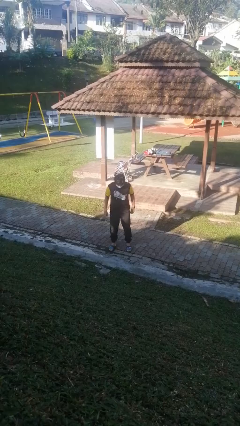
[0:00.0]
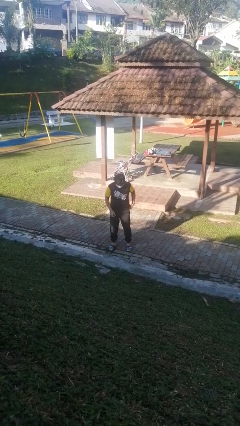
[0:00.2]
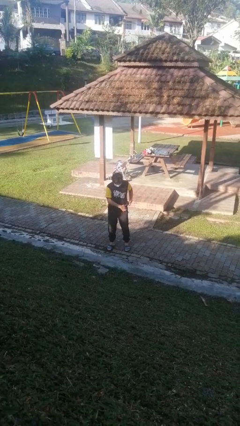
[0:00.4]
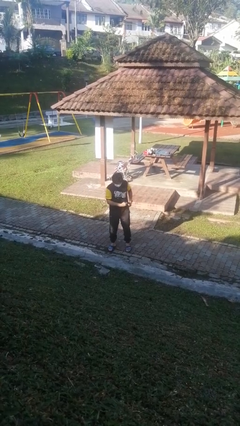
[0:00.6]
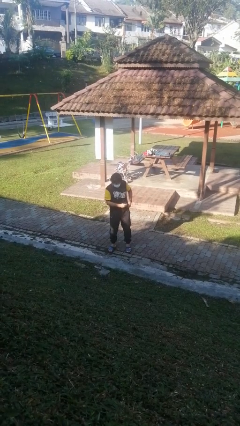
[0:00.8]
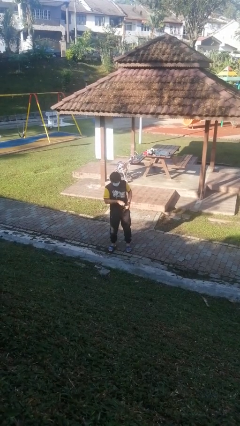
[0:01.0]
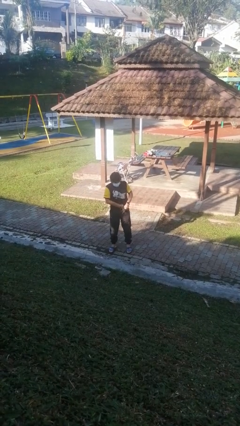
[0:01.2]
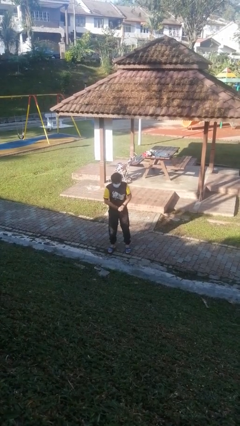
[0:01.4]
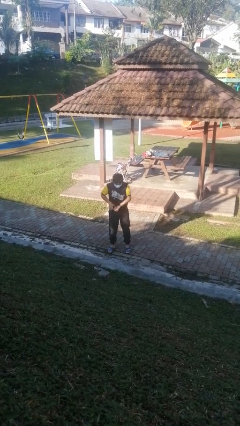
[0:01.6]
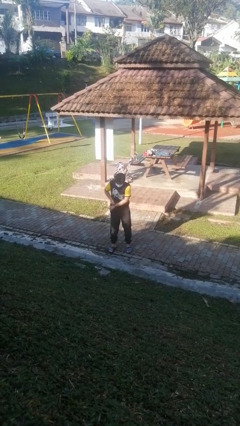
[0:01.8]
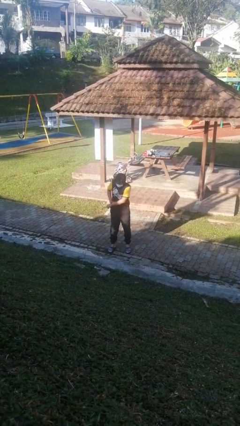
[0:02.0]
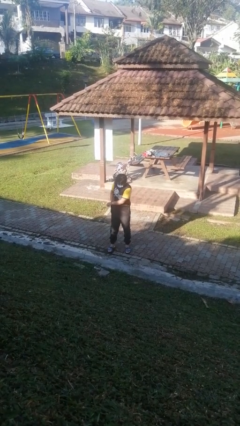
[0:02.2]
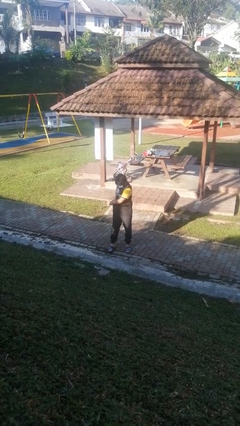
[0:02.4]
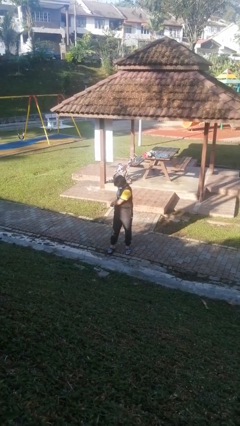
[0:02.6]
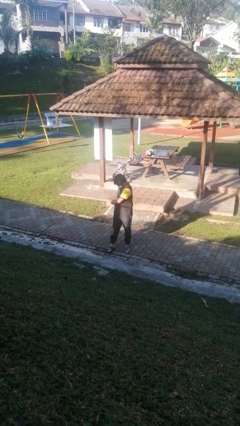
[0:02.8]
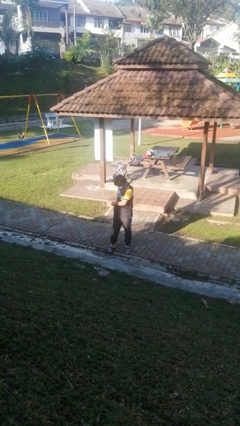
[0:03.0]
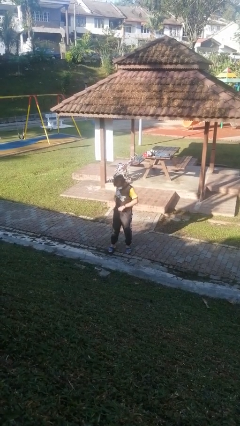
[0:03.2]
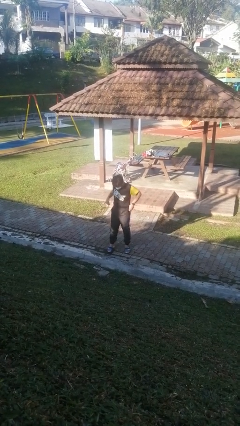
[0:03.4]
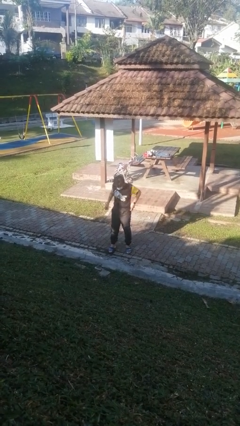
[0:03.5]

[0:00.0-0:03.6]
person tucks in shirt

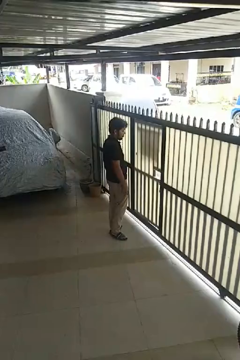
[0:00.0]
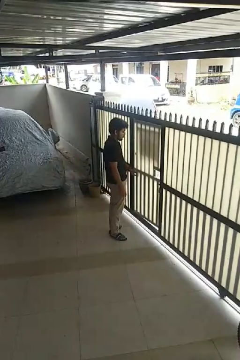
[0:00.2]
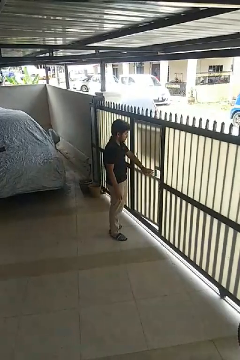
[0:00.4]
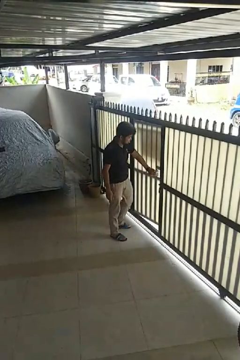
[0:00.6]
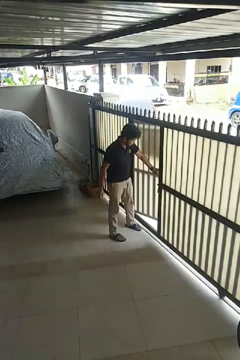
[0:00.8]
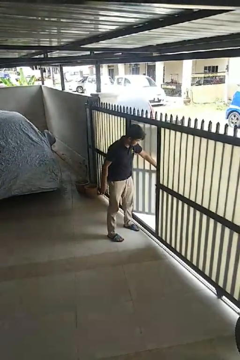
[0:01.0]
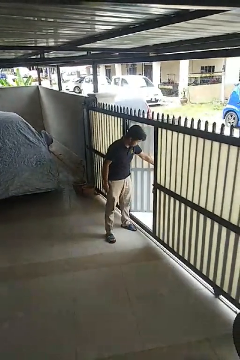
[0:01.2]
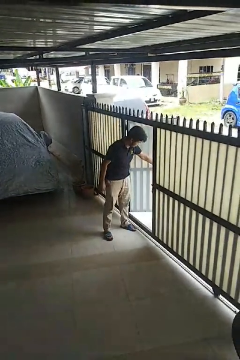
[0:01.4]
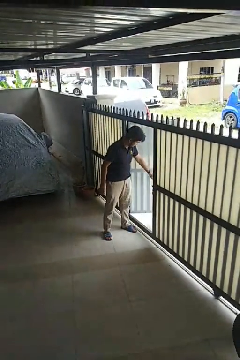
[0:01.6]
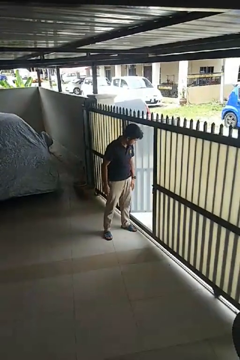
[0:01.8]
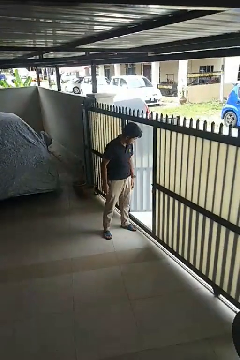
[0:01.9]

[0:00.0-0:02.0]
person opens gate

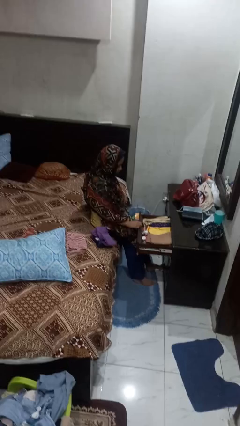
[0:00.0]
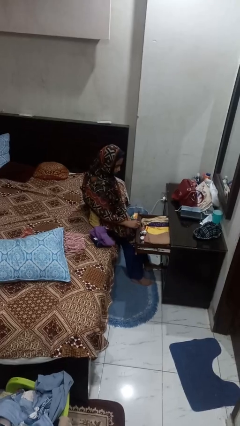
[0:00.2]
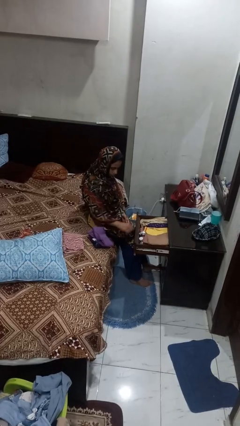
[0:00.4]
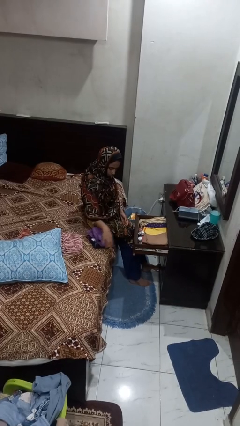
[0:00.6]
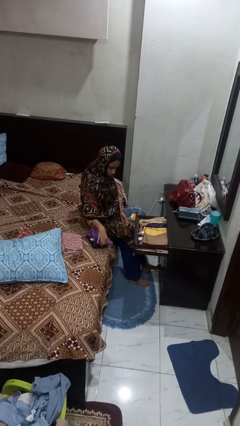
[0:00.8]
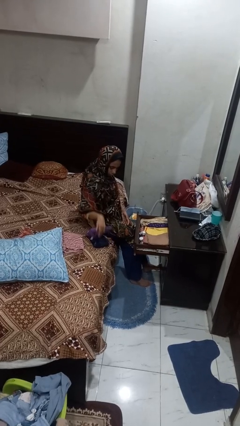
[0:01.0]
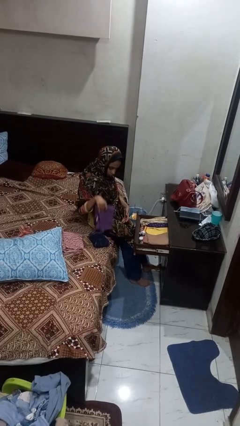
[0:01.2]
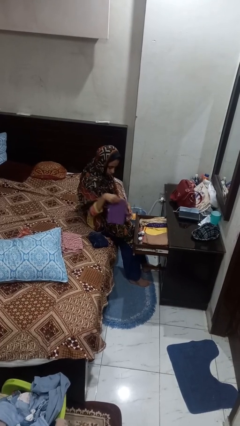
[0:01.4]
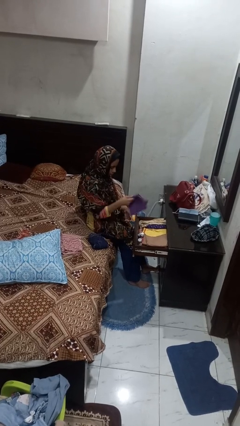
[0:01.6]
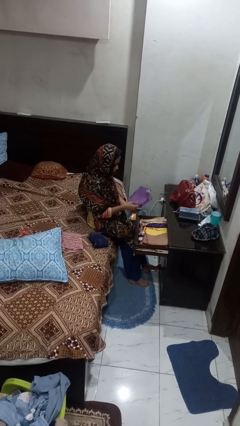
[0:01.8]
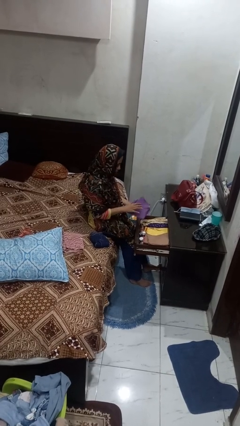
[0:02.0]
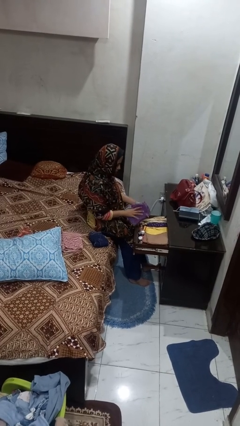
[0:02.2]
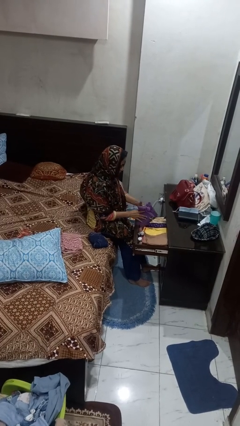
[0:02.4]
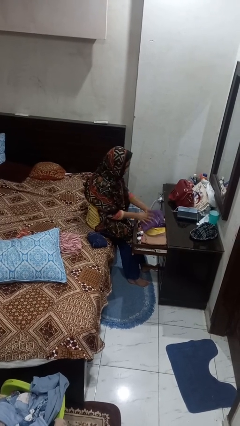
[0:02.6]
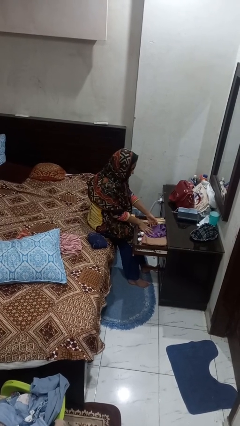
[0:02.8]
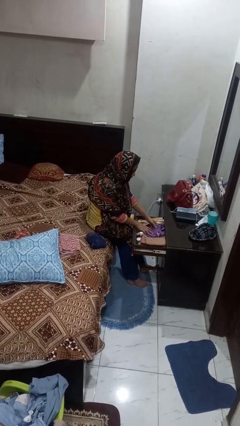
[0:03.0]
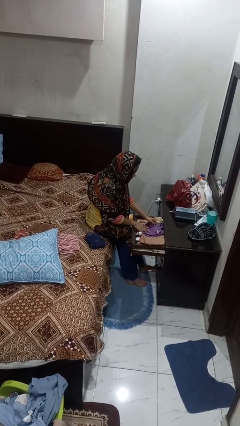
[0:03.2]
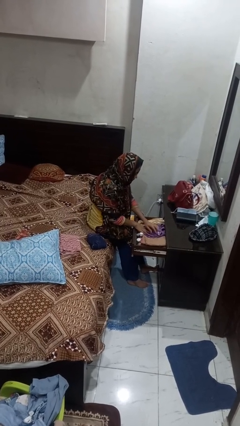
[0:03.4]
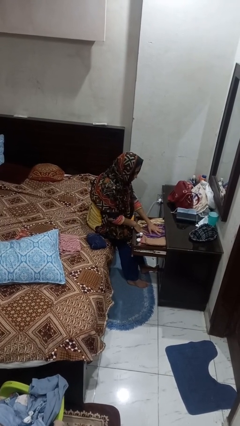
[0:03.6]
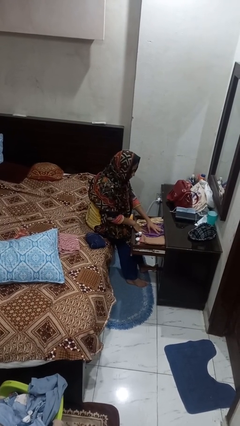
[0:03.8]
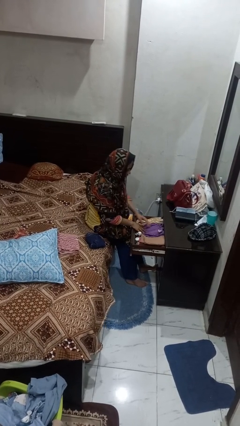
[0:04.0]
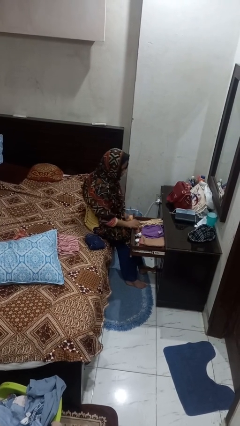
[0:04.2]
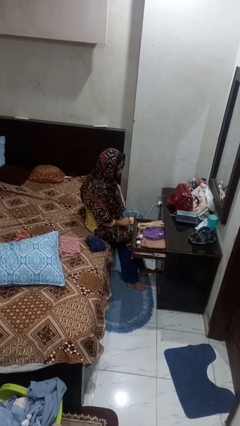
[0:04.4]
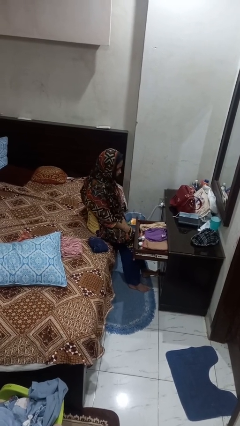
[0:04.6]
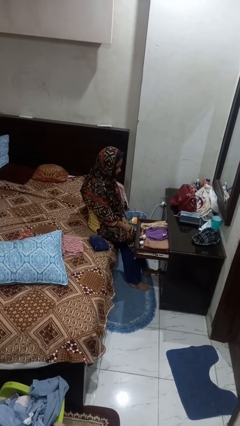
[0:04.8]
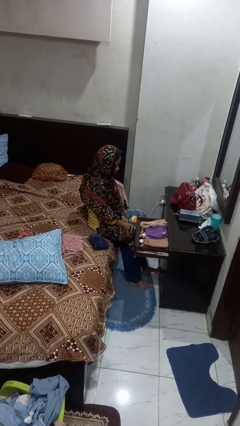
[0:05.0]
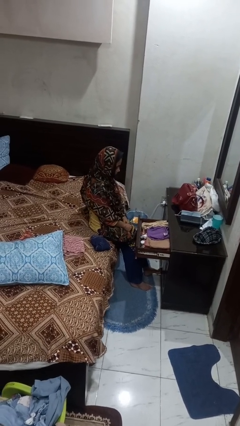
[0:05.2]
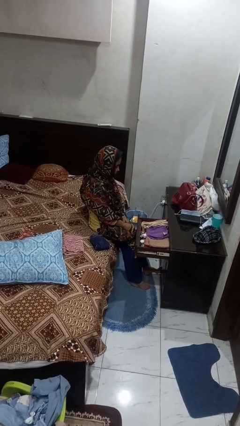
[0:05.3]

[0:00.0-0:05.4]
person puts clothes into dresser

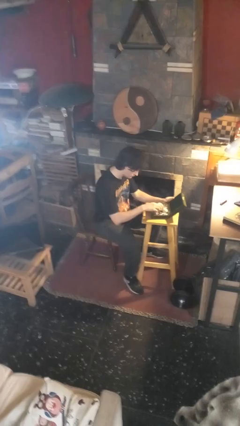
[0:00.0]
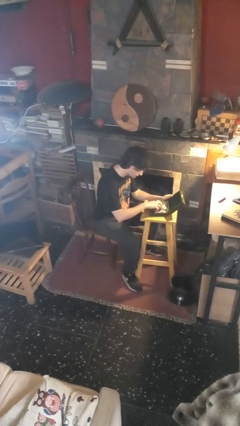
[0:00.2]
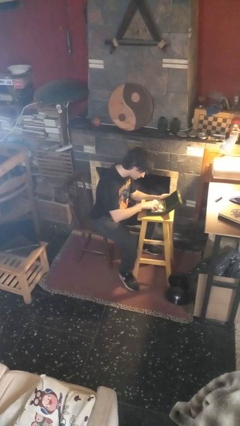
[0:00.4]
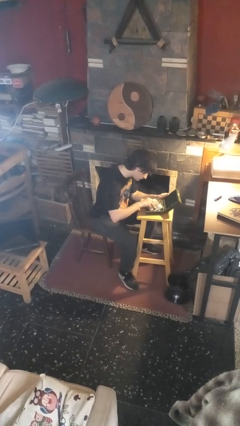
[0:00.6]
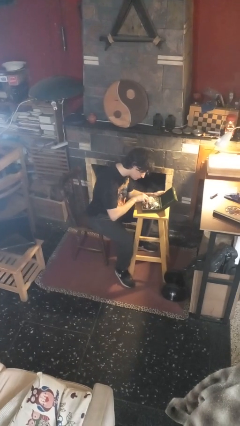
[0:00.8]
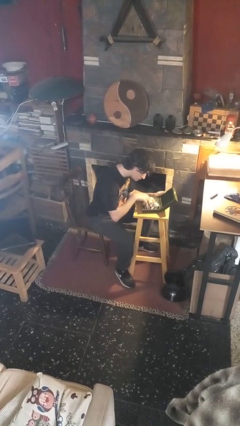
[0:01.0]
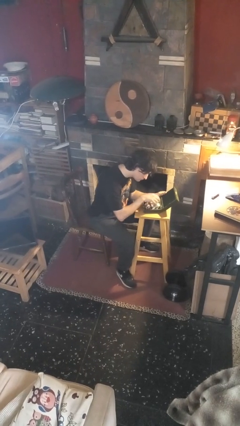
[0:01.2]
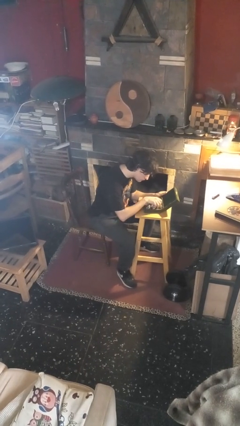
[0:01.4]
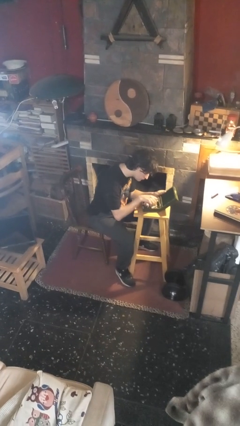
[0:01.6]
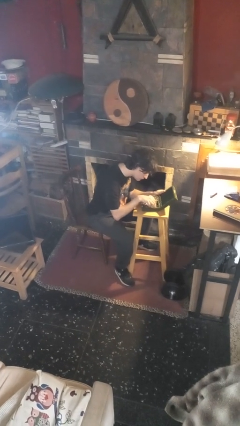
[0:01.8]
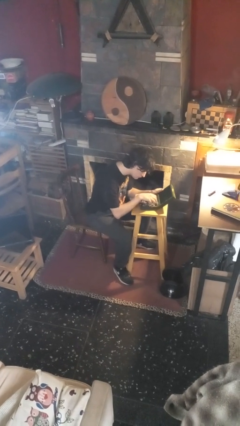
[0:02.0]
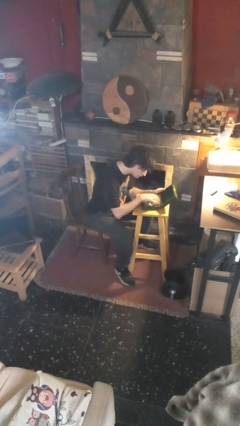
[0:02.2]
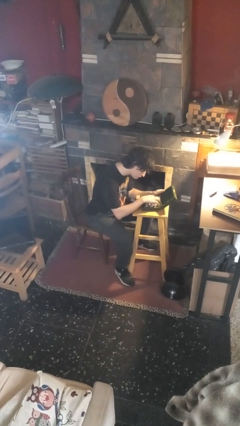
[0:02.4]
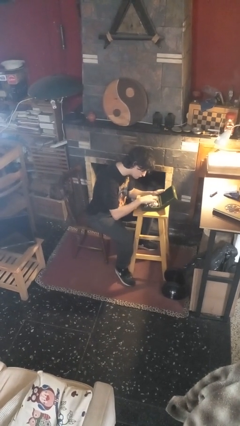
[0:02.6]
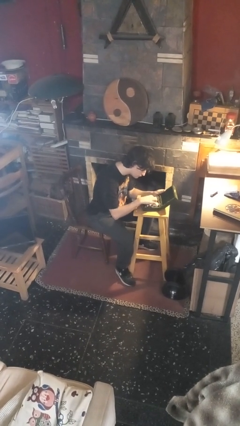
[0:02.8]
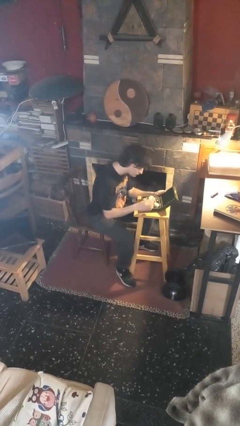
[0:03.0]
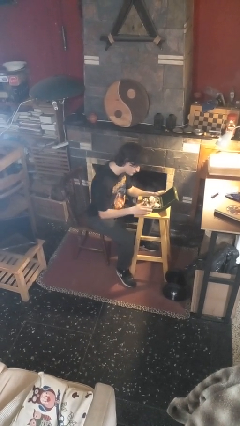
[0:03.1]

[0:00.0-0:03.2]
person searches jewelry box

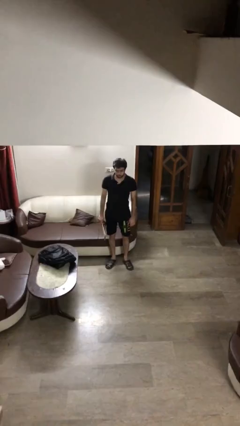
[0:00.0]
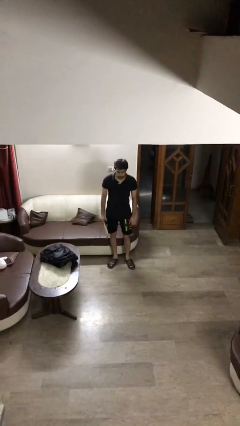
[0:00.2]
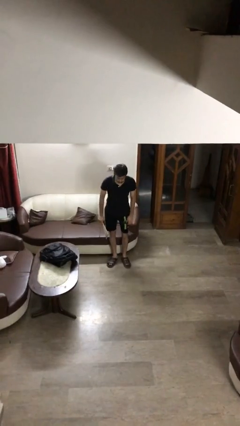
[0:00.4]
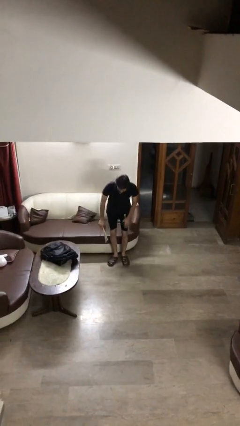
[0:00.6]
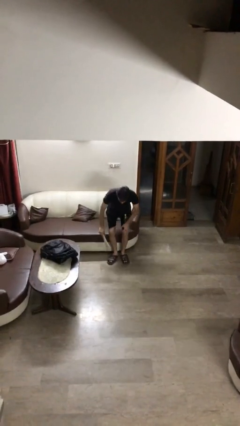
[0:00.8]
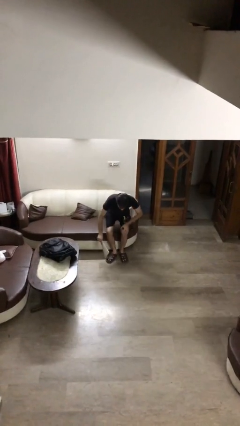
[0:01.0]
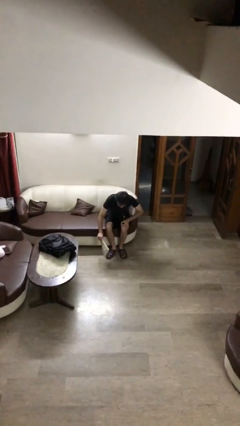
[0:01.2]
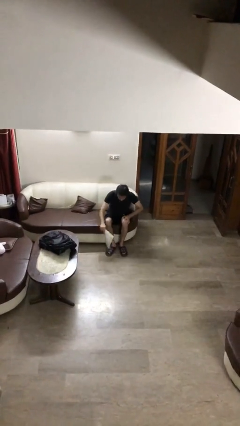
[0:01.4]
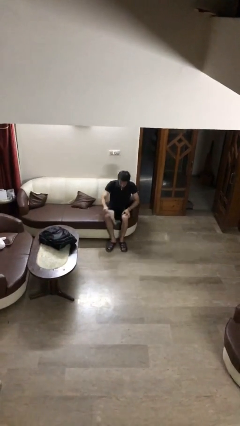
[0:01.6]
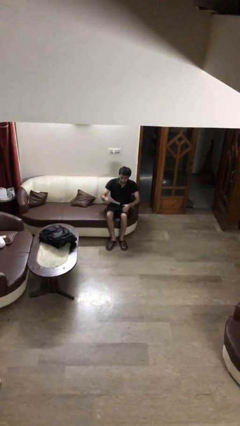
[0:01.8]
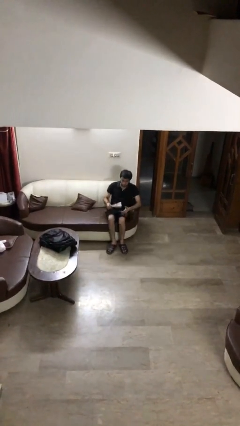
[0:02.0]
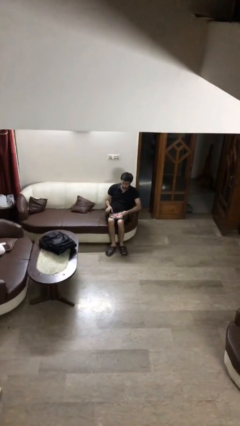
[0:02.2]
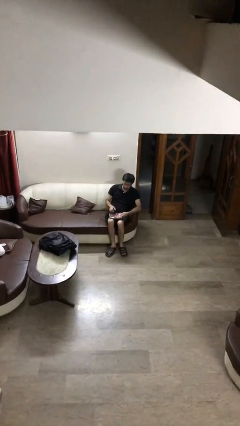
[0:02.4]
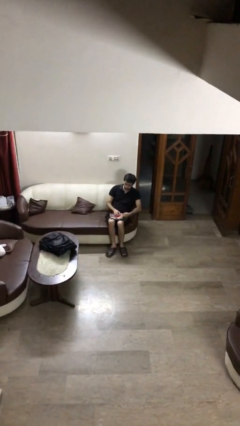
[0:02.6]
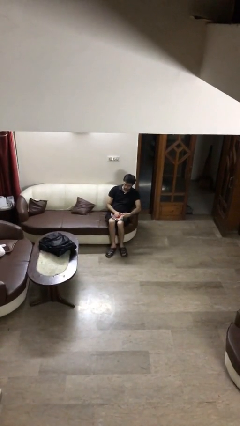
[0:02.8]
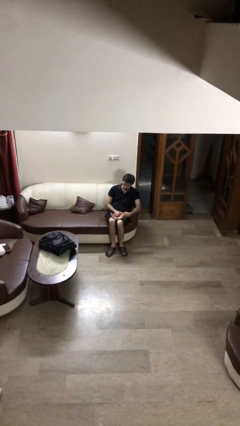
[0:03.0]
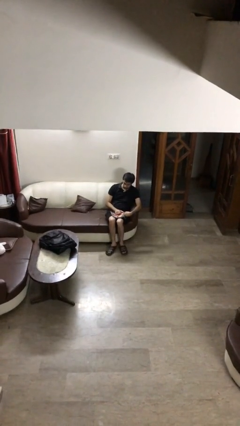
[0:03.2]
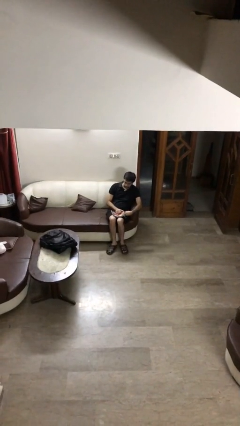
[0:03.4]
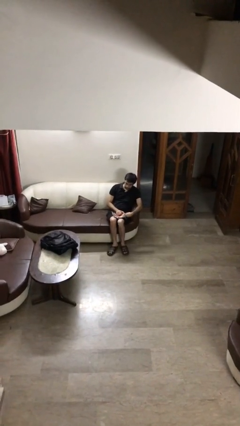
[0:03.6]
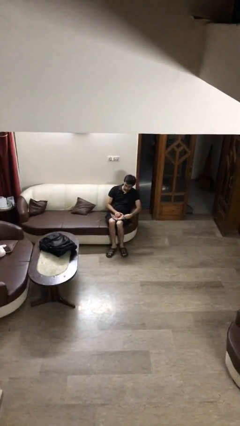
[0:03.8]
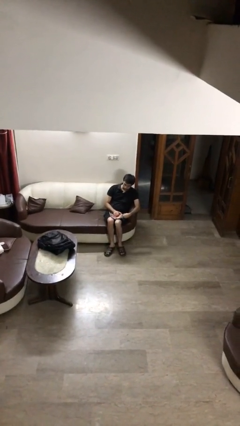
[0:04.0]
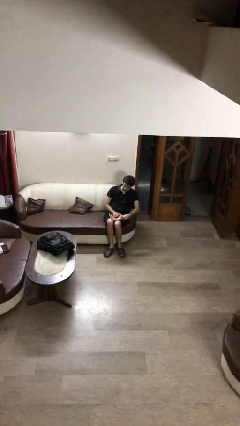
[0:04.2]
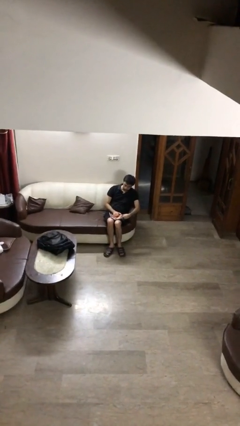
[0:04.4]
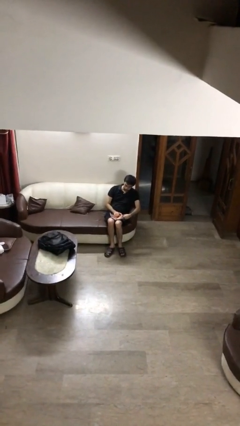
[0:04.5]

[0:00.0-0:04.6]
person sits down
